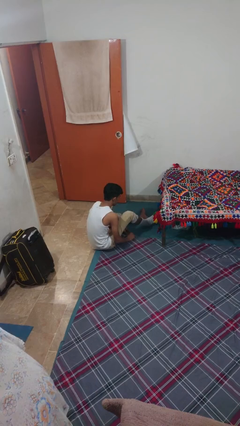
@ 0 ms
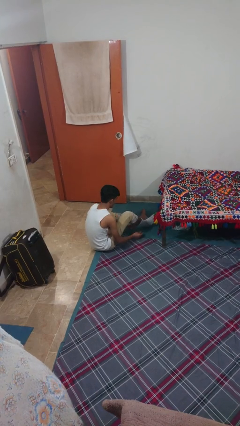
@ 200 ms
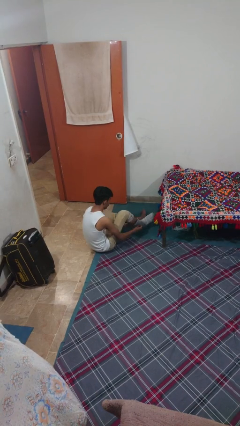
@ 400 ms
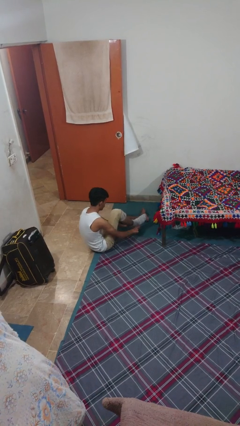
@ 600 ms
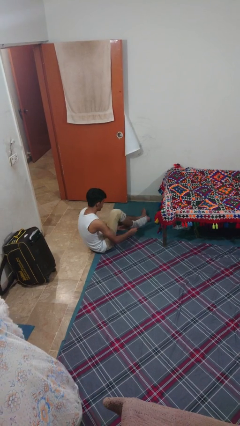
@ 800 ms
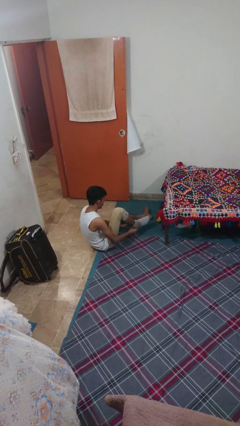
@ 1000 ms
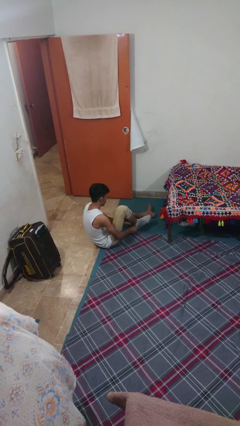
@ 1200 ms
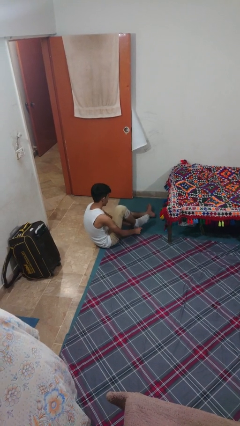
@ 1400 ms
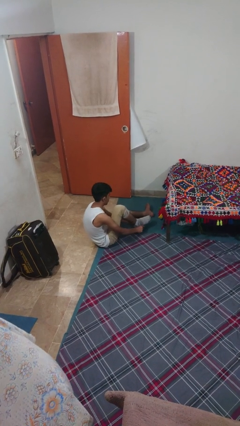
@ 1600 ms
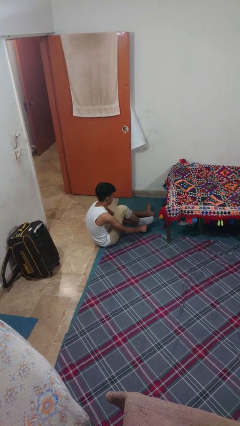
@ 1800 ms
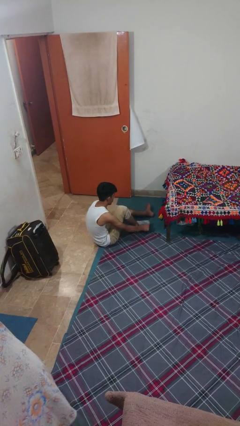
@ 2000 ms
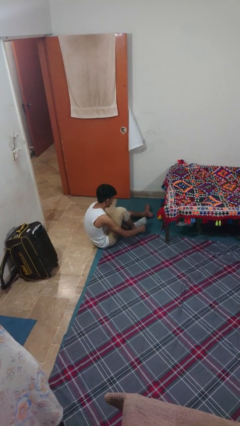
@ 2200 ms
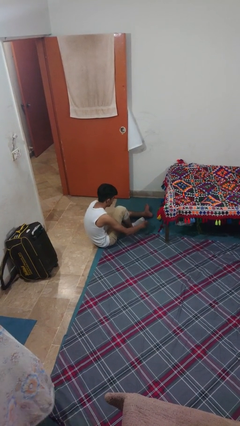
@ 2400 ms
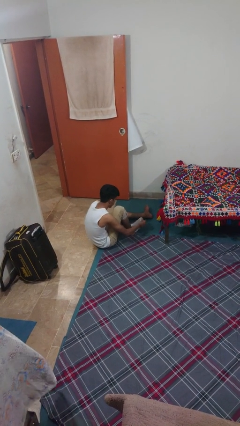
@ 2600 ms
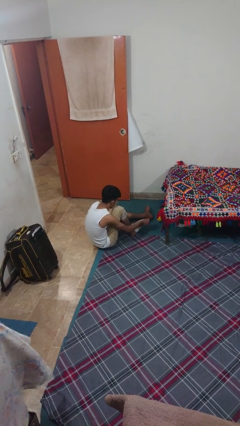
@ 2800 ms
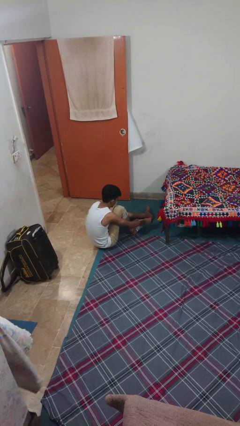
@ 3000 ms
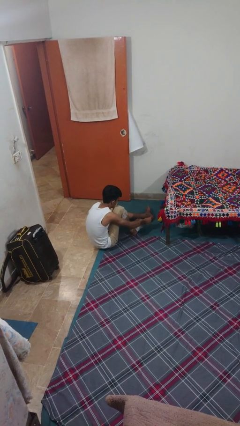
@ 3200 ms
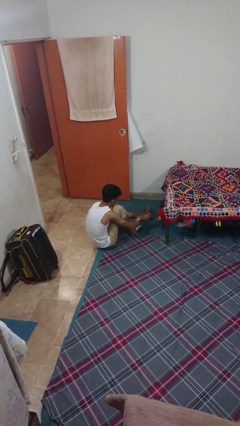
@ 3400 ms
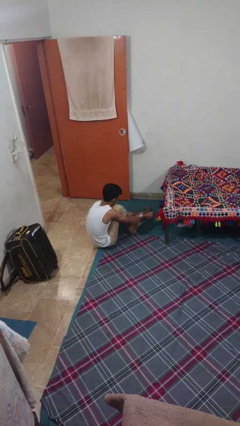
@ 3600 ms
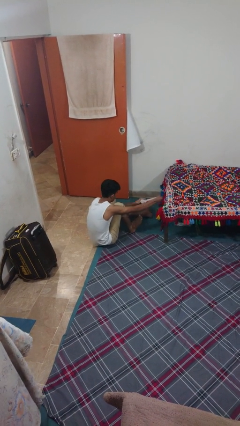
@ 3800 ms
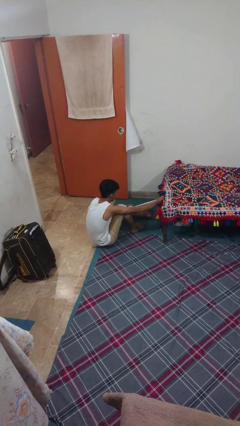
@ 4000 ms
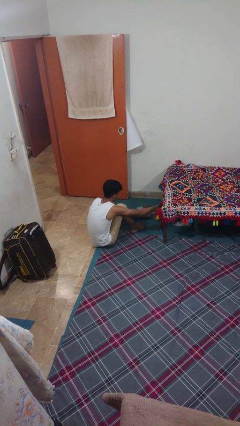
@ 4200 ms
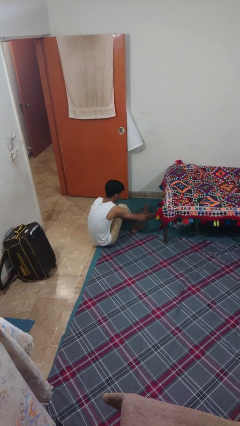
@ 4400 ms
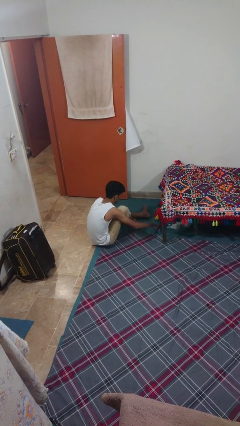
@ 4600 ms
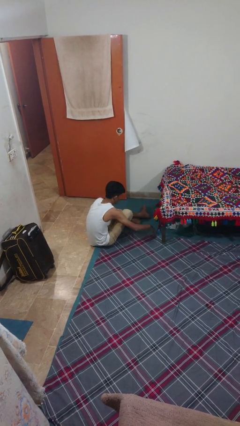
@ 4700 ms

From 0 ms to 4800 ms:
person takes off socks

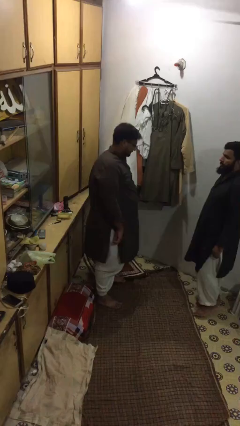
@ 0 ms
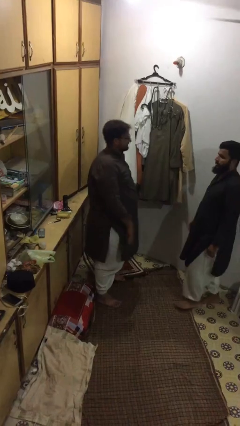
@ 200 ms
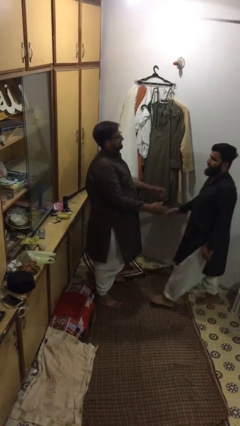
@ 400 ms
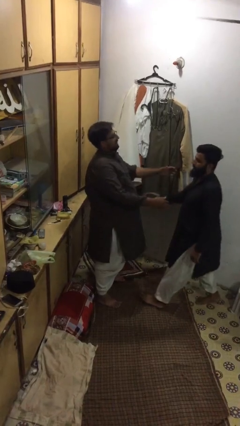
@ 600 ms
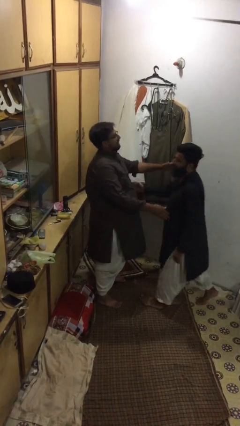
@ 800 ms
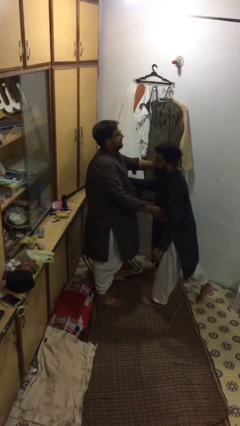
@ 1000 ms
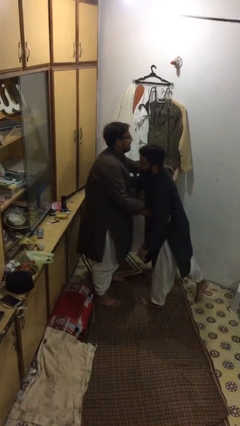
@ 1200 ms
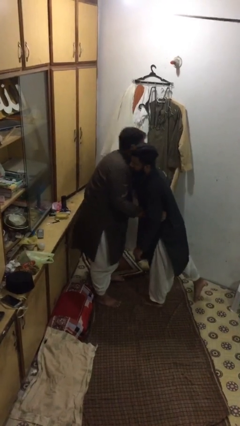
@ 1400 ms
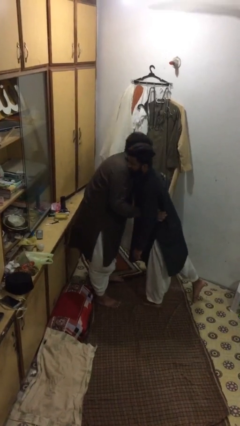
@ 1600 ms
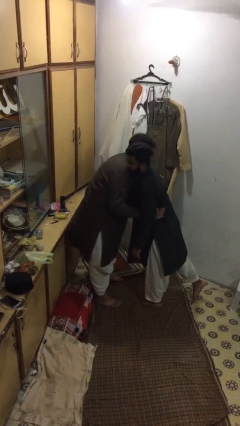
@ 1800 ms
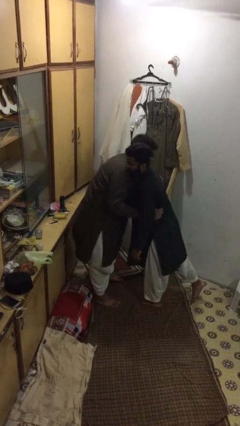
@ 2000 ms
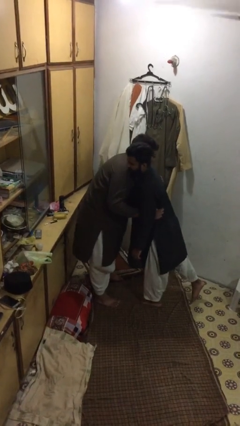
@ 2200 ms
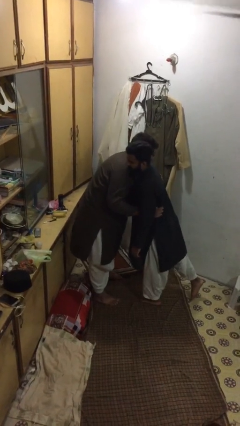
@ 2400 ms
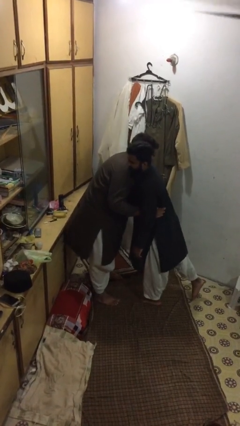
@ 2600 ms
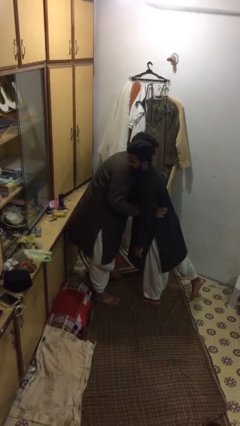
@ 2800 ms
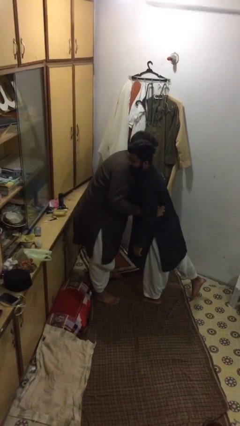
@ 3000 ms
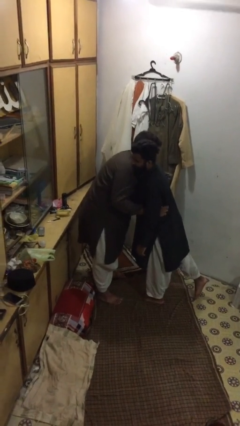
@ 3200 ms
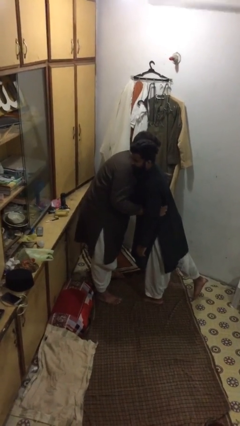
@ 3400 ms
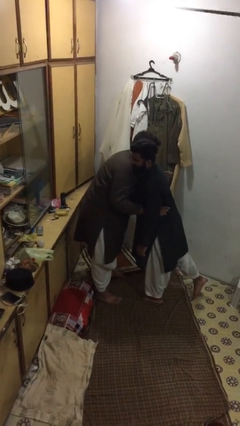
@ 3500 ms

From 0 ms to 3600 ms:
person embraces person

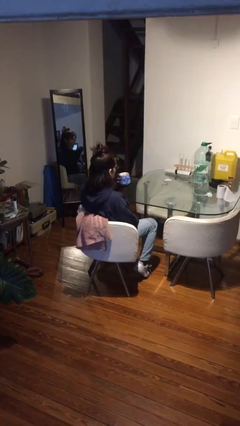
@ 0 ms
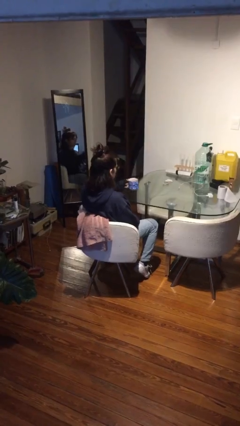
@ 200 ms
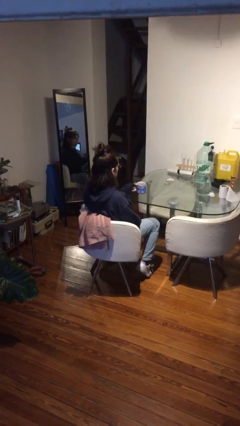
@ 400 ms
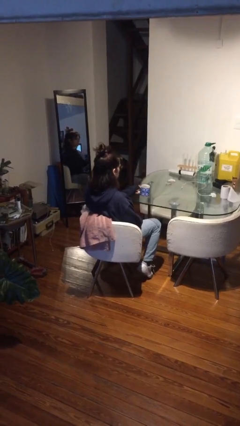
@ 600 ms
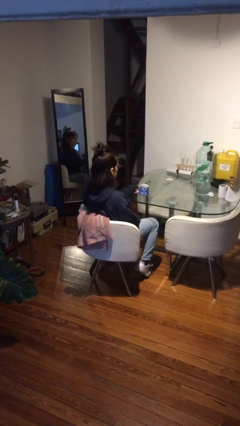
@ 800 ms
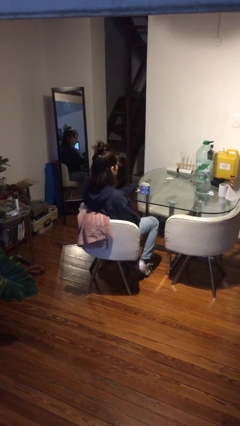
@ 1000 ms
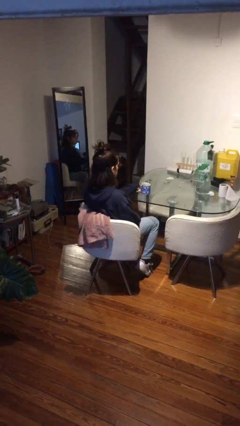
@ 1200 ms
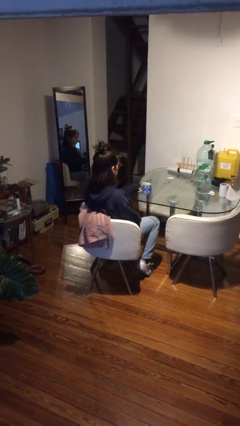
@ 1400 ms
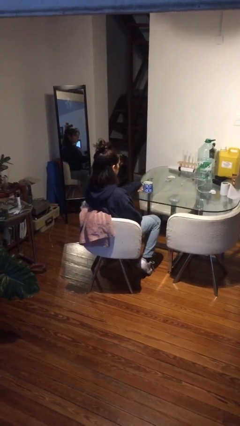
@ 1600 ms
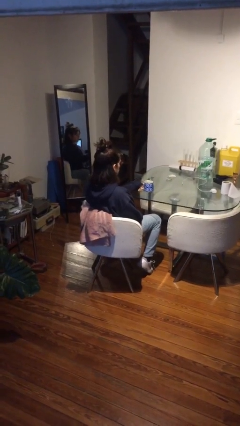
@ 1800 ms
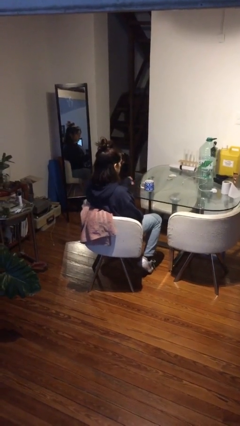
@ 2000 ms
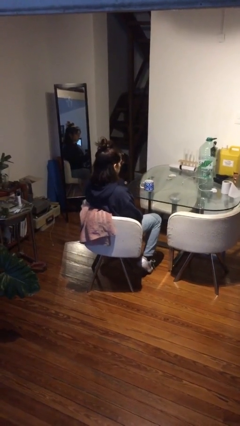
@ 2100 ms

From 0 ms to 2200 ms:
person puts down object on table

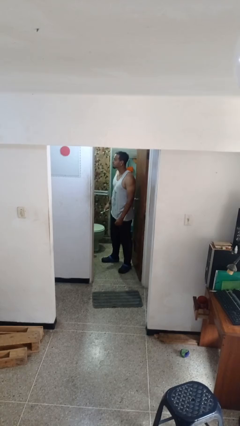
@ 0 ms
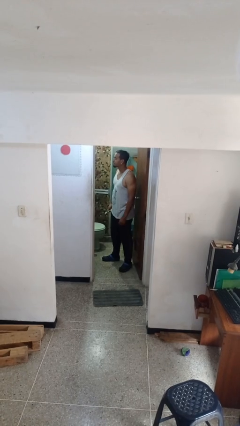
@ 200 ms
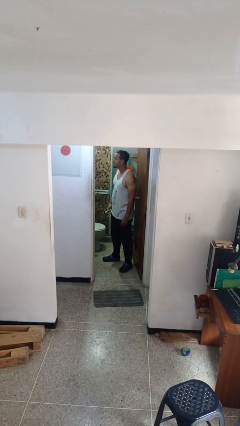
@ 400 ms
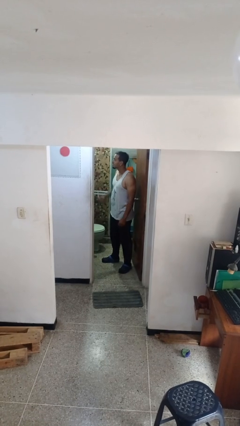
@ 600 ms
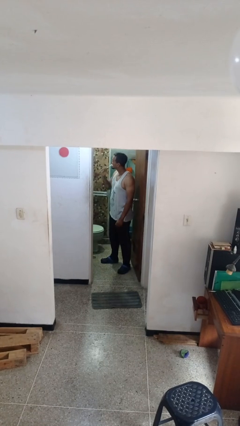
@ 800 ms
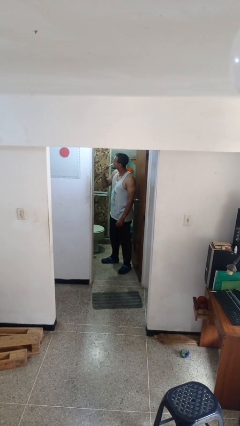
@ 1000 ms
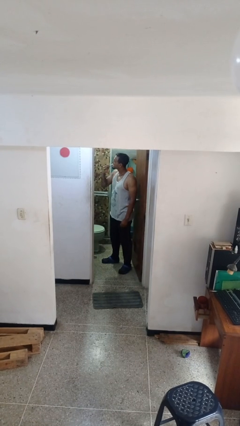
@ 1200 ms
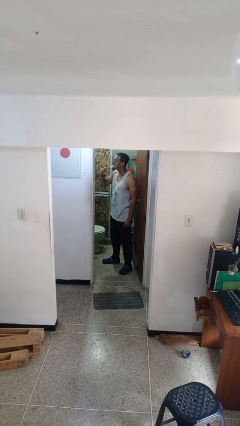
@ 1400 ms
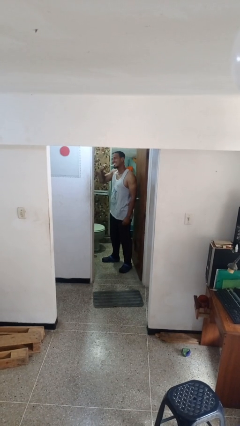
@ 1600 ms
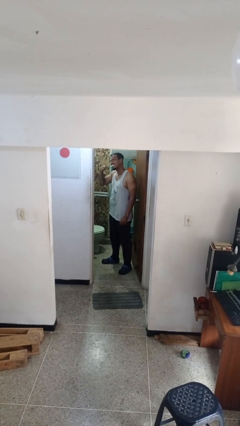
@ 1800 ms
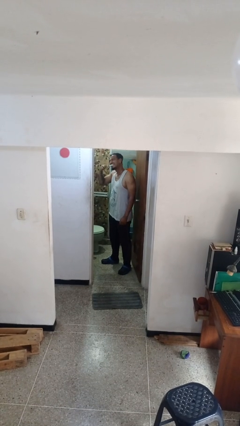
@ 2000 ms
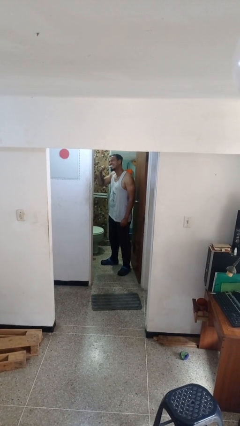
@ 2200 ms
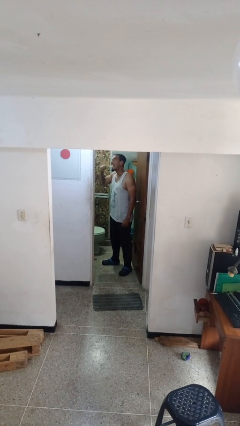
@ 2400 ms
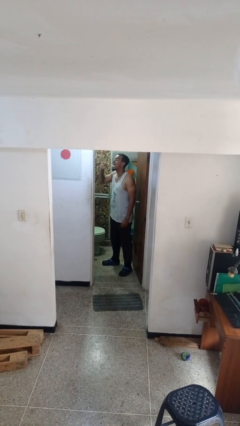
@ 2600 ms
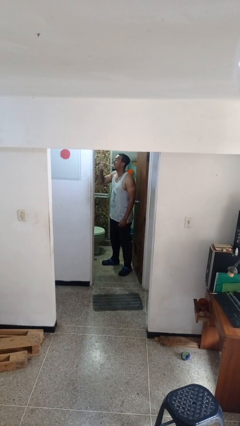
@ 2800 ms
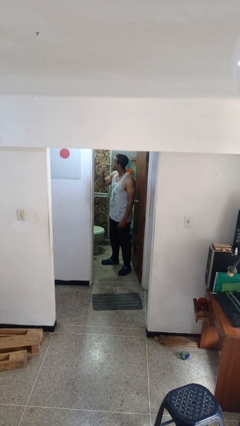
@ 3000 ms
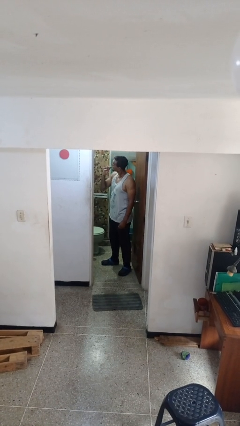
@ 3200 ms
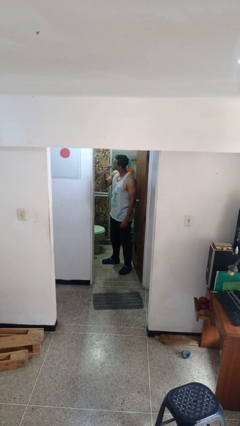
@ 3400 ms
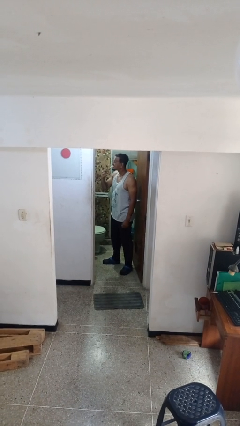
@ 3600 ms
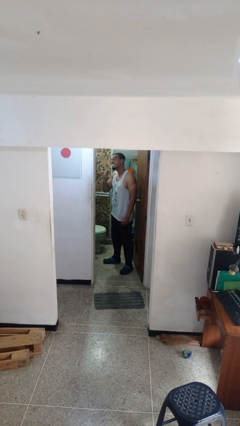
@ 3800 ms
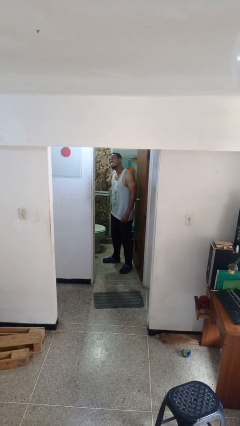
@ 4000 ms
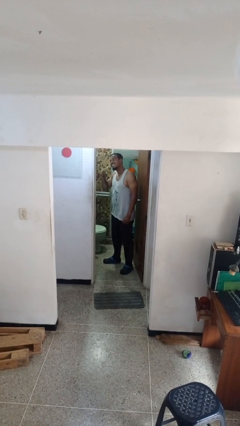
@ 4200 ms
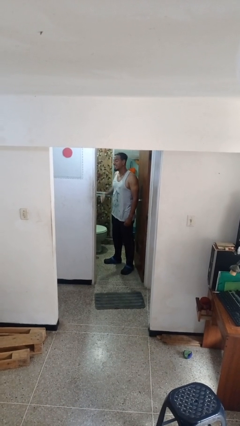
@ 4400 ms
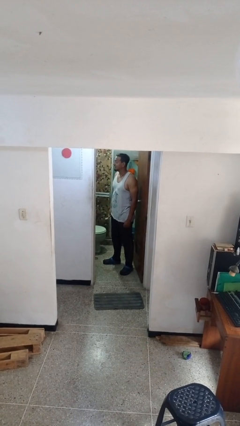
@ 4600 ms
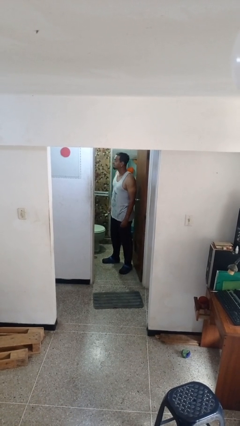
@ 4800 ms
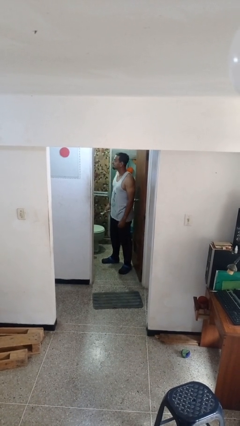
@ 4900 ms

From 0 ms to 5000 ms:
person brushes teeth

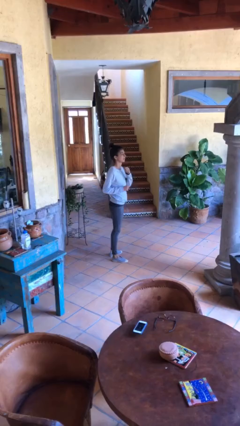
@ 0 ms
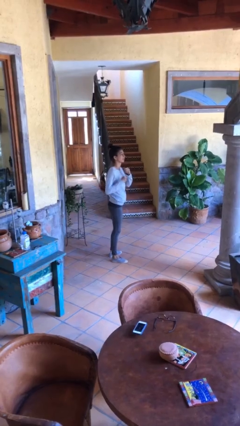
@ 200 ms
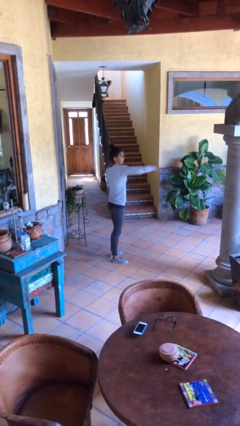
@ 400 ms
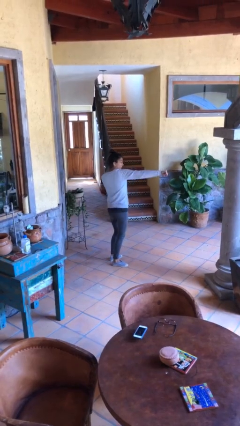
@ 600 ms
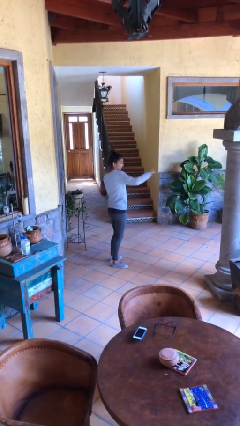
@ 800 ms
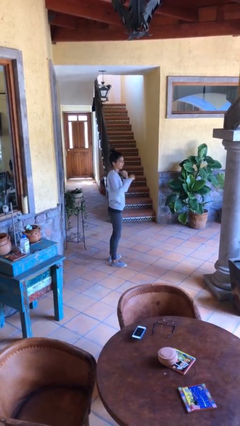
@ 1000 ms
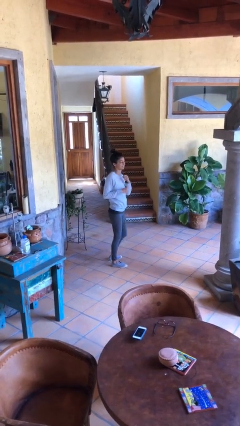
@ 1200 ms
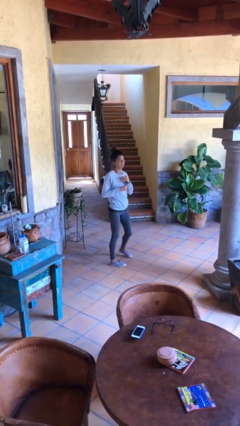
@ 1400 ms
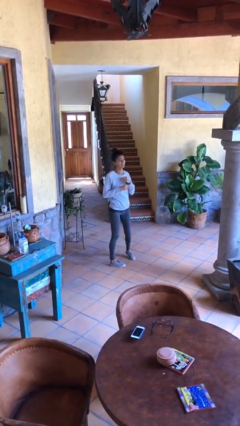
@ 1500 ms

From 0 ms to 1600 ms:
person karate chop

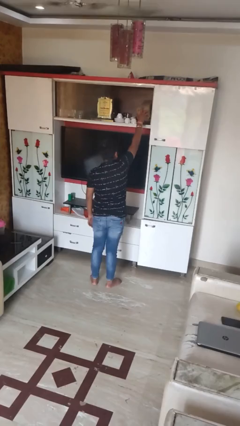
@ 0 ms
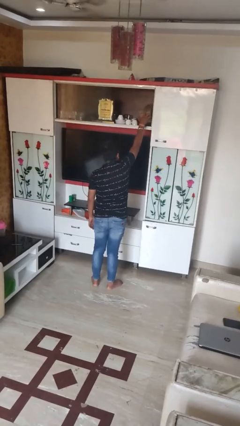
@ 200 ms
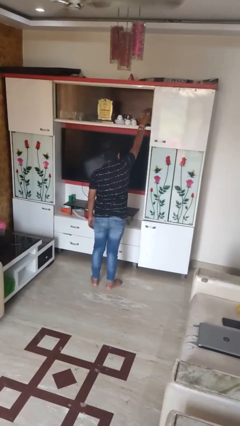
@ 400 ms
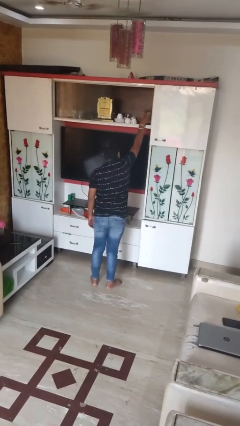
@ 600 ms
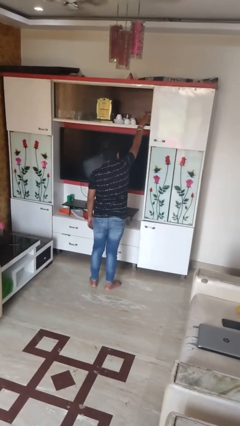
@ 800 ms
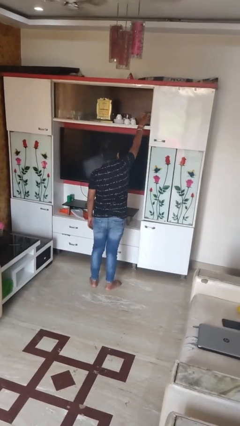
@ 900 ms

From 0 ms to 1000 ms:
person puts down object on shelf
